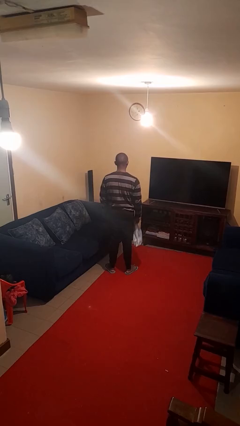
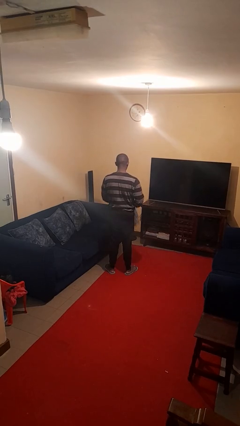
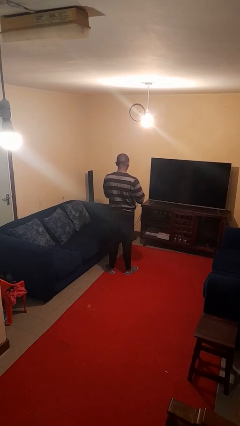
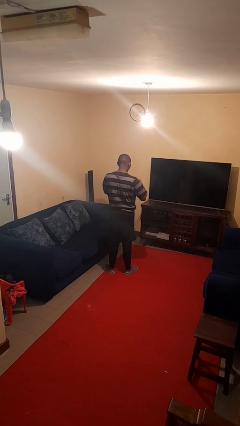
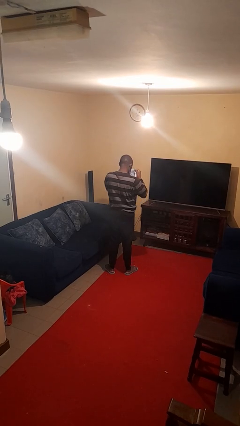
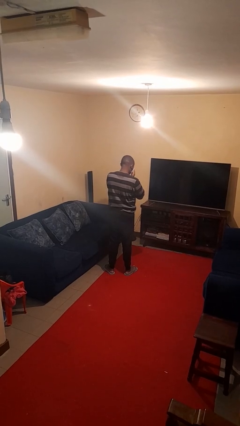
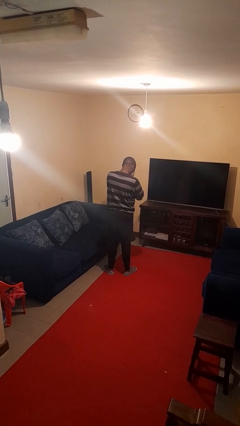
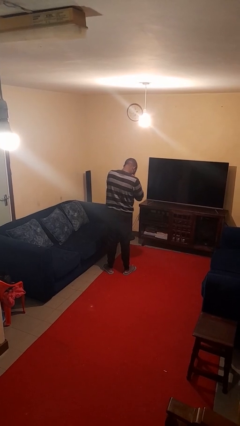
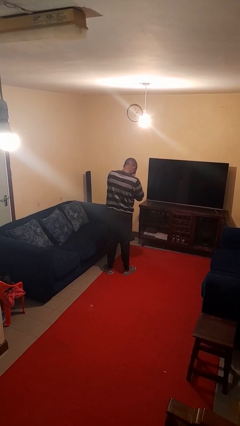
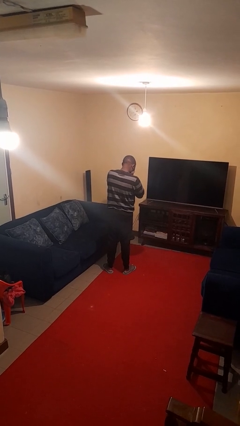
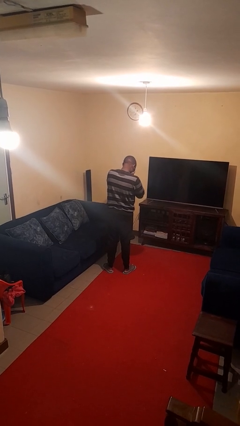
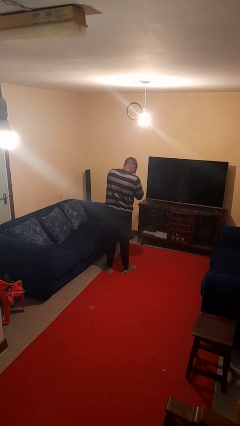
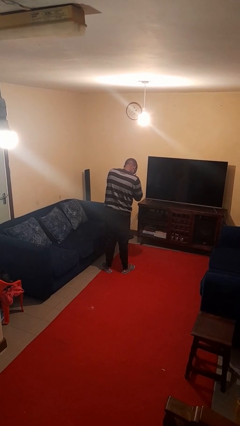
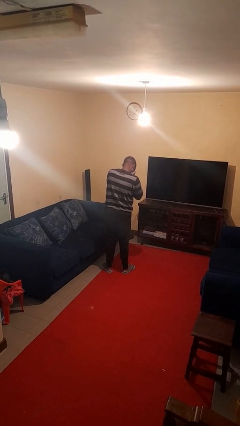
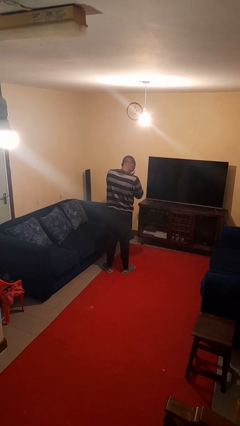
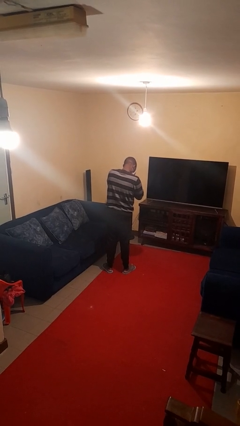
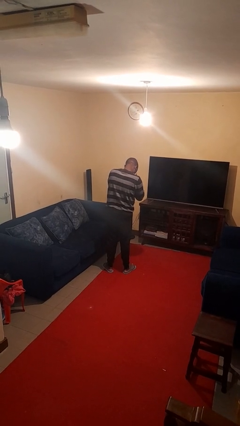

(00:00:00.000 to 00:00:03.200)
person blows nose

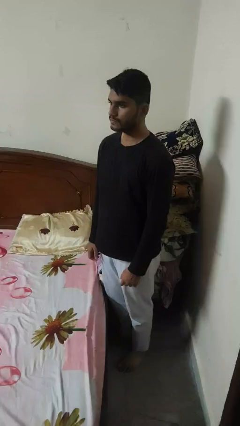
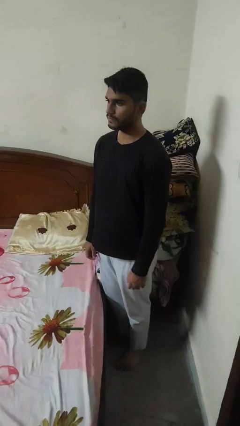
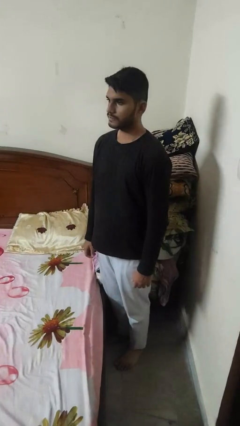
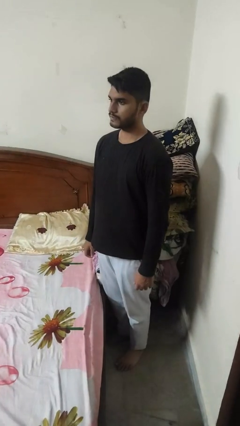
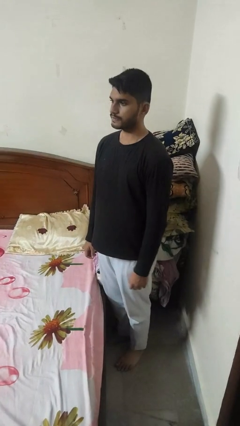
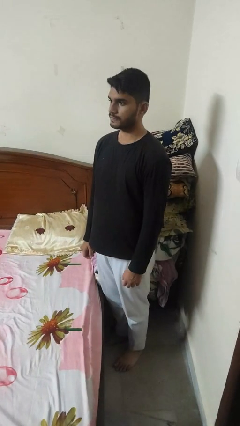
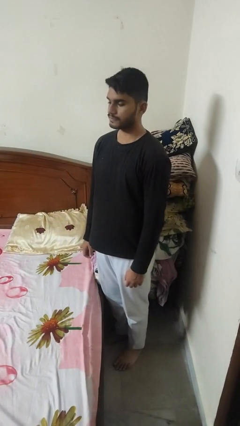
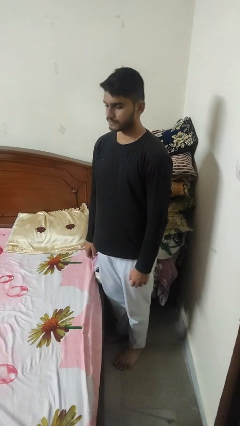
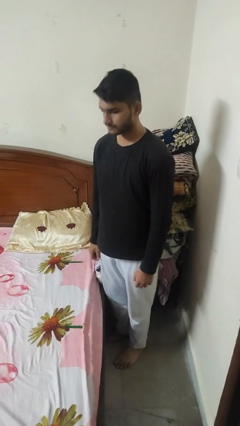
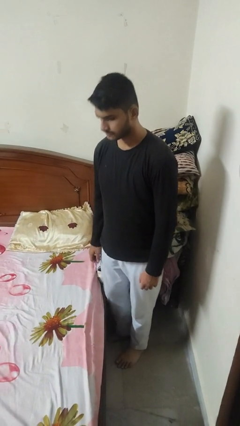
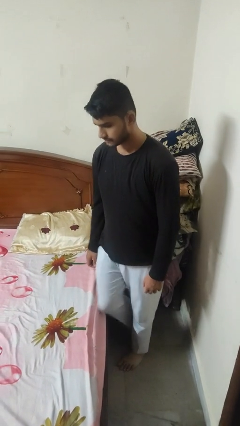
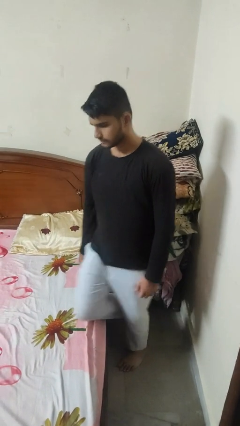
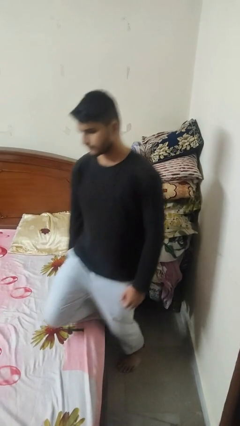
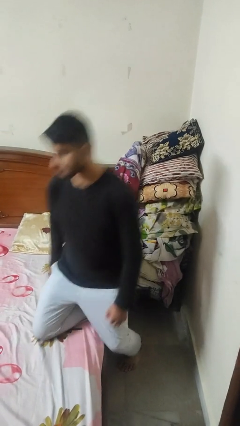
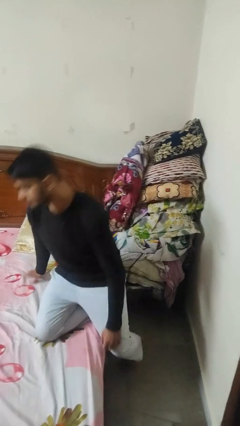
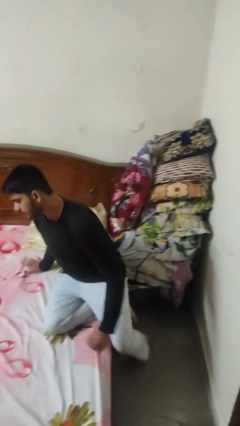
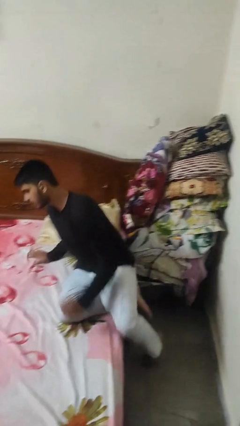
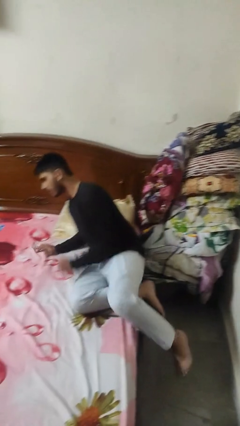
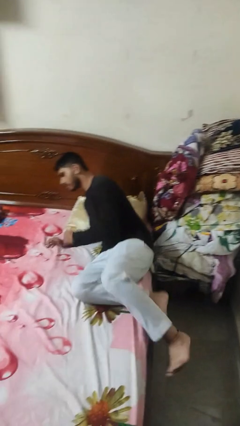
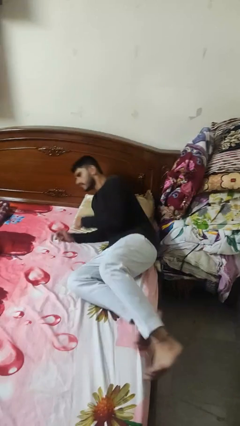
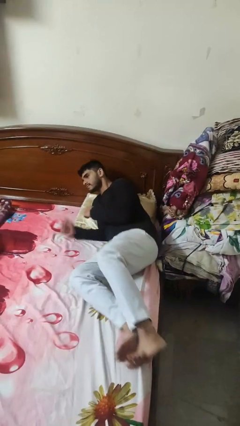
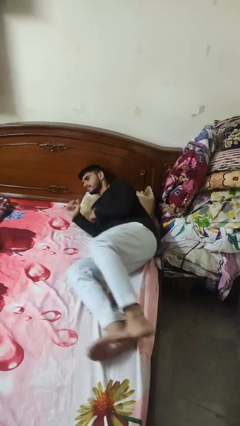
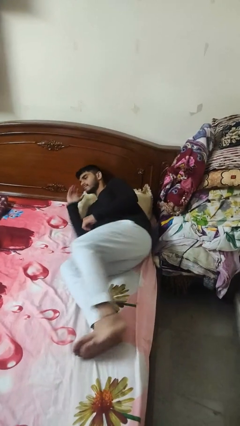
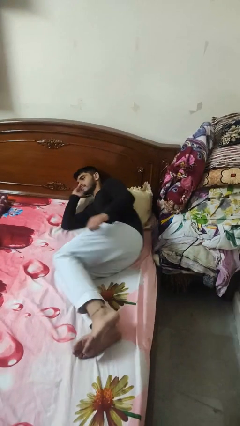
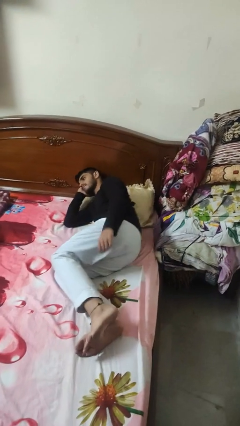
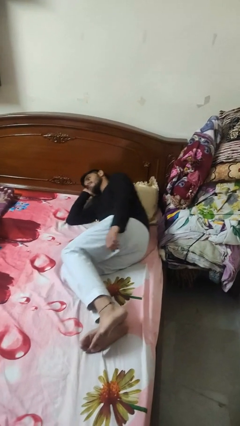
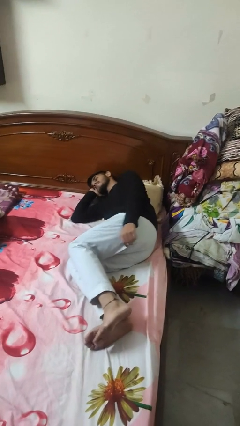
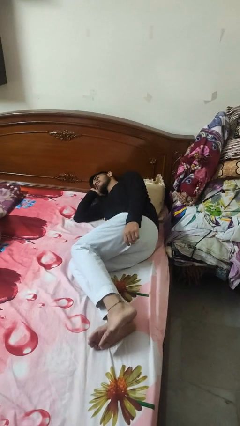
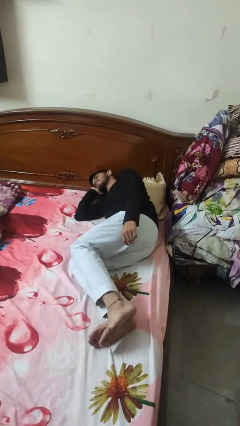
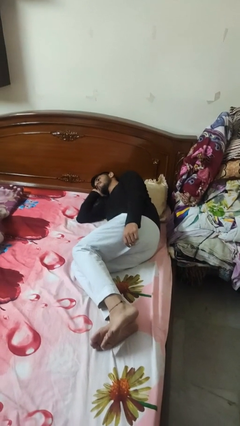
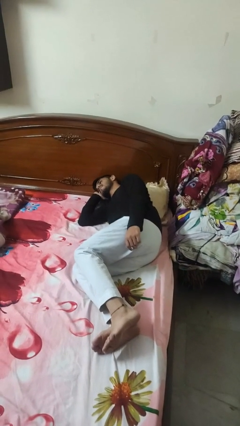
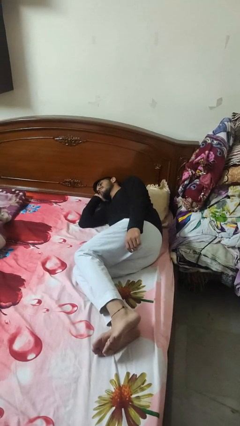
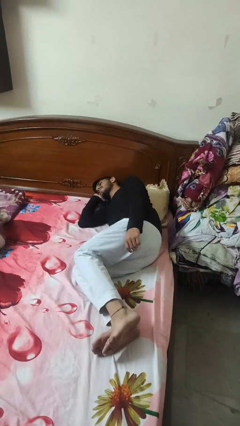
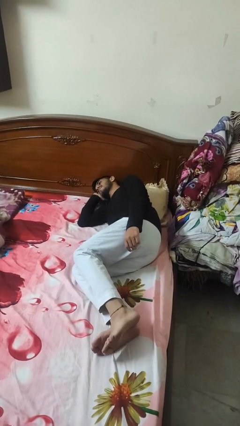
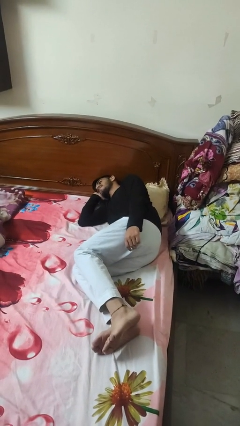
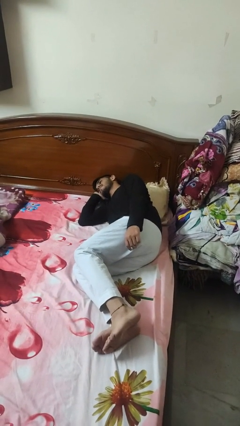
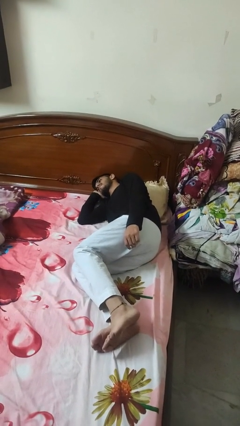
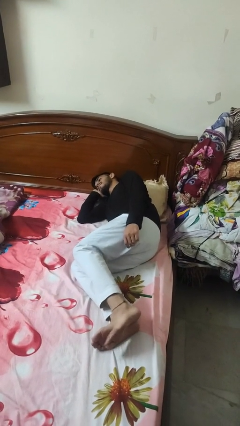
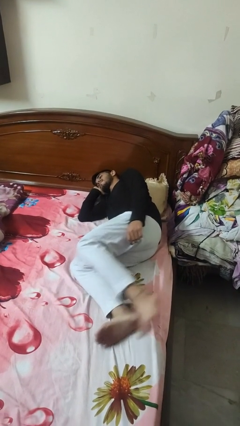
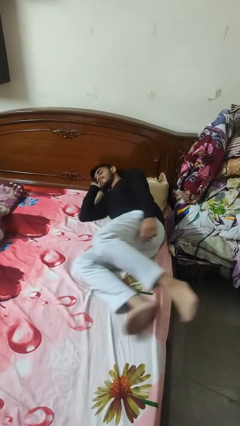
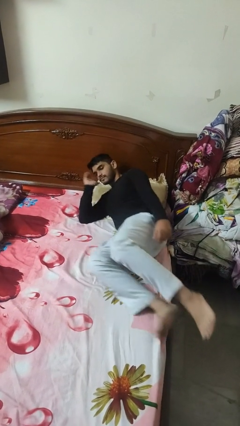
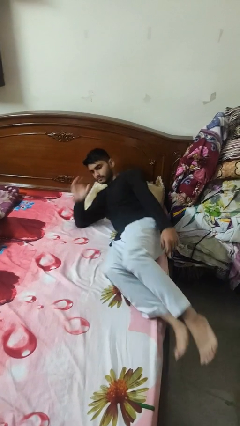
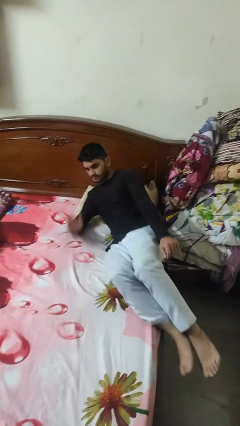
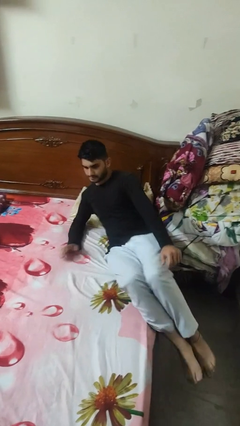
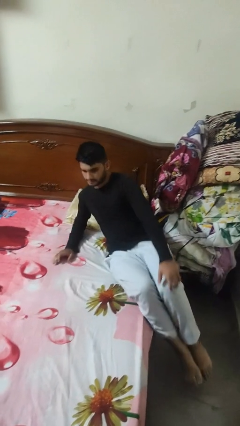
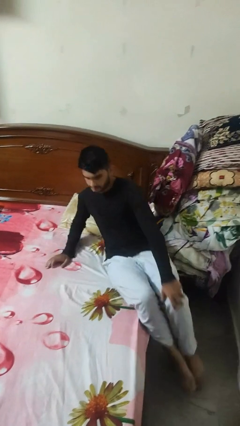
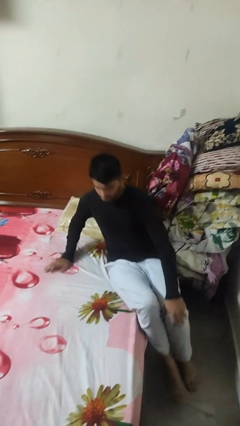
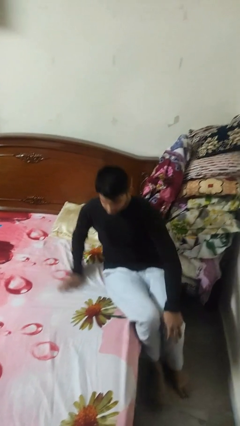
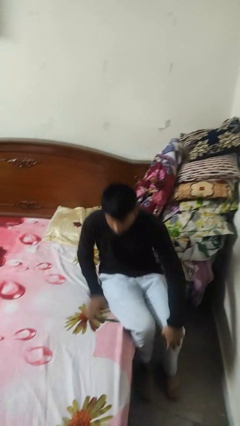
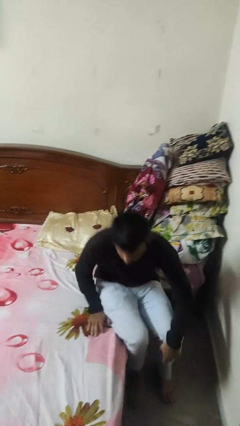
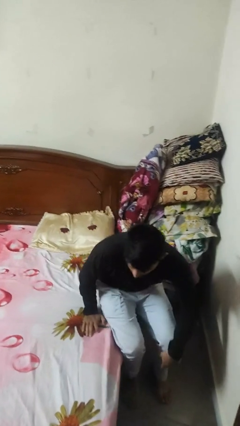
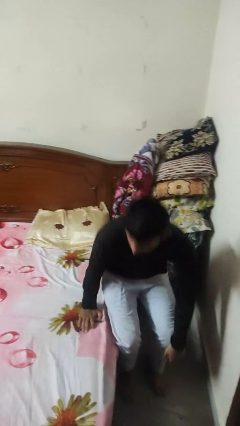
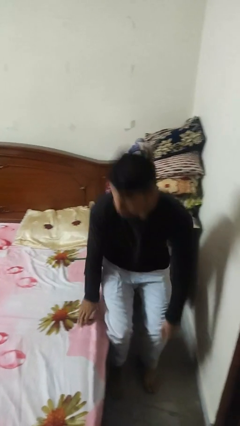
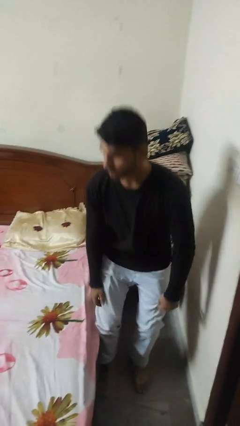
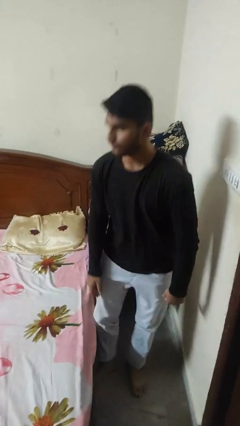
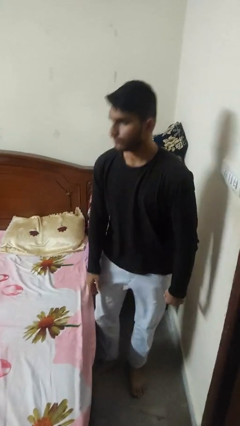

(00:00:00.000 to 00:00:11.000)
person stands up

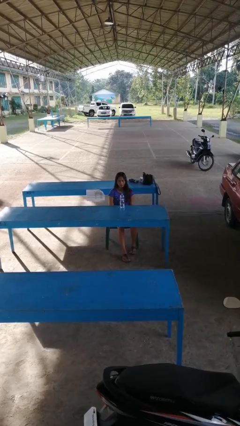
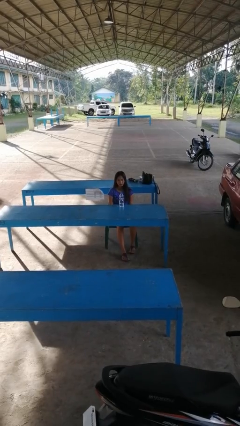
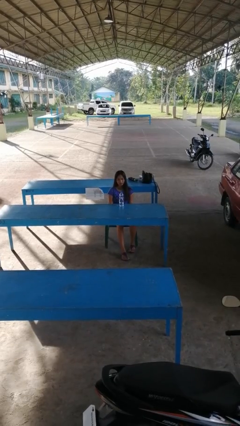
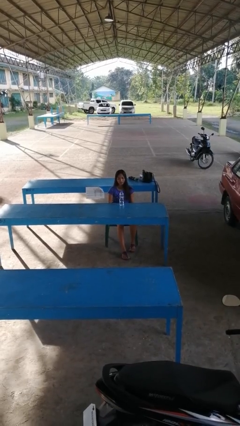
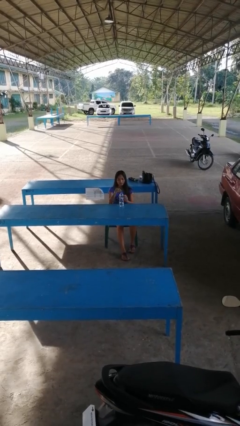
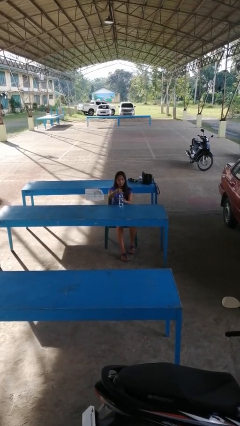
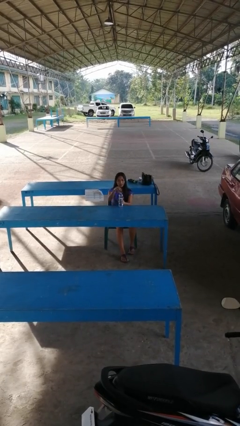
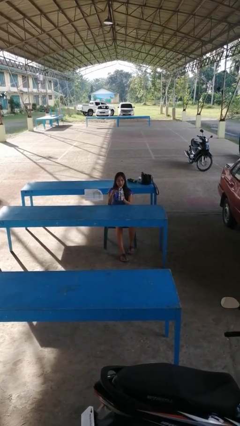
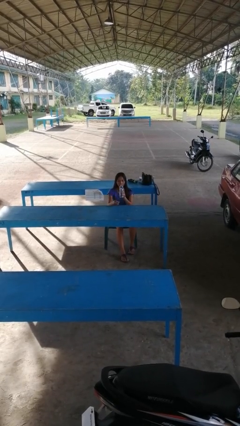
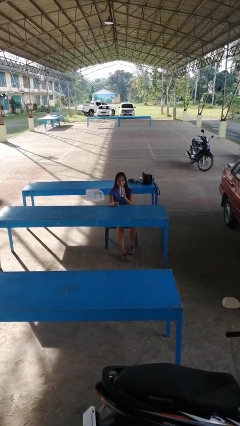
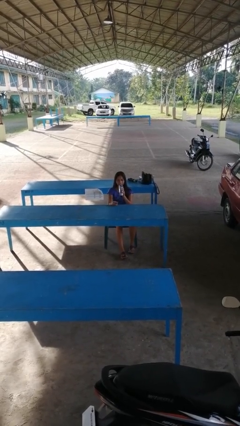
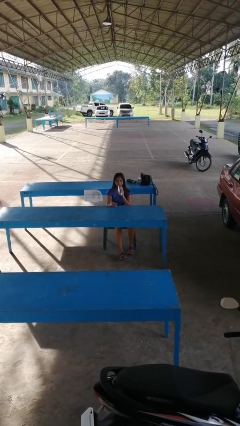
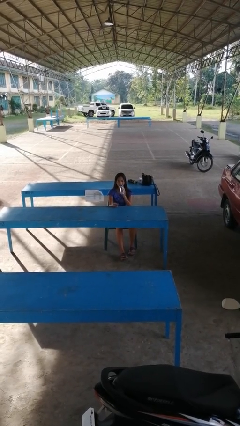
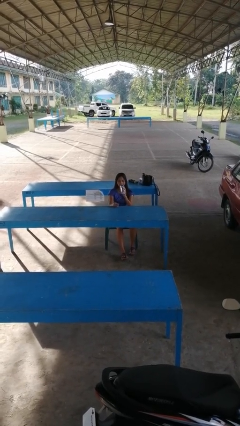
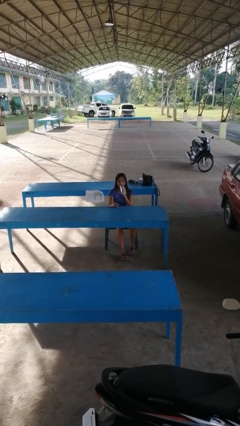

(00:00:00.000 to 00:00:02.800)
person drinks from bottle

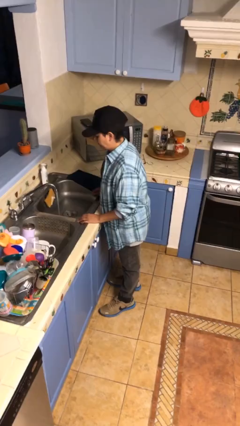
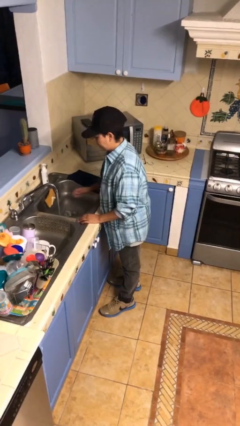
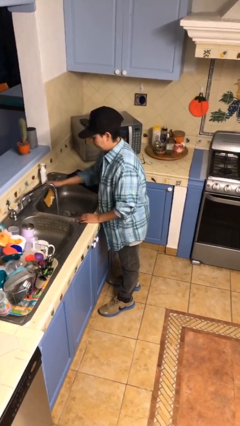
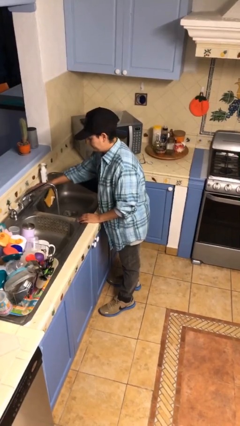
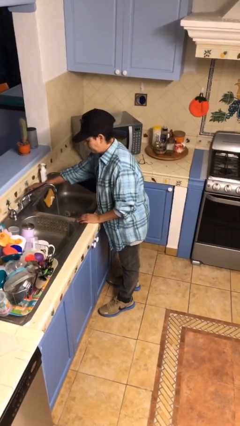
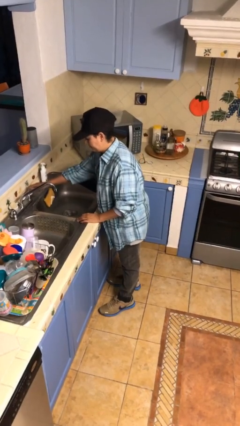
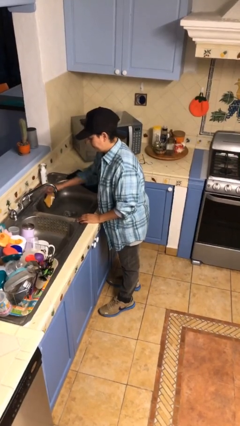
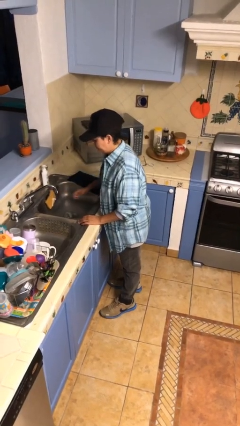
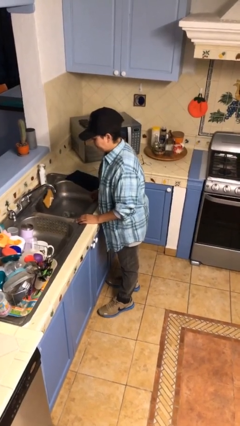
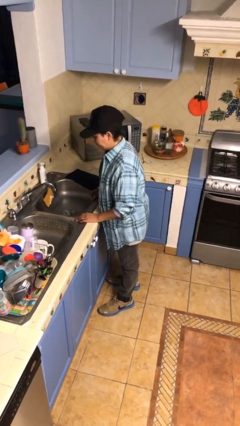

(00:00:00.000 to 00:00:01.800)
person turns off faucet
